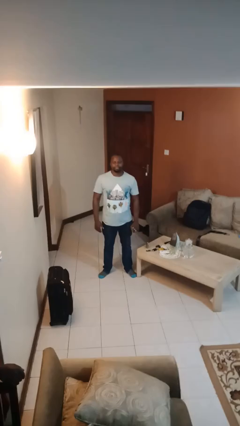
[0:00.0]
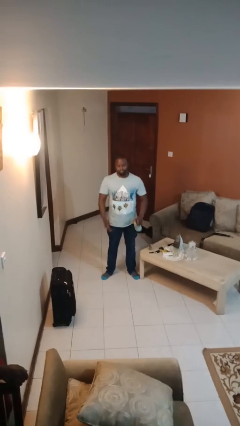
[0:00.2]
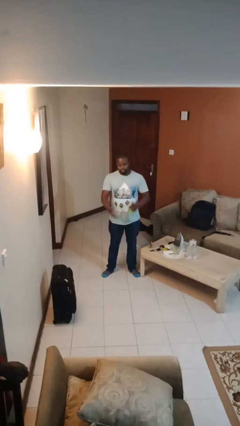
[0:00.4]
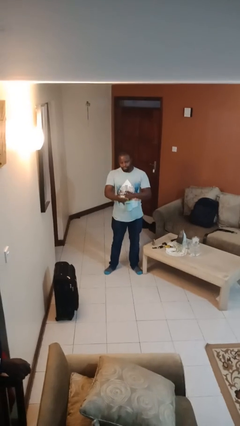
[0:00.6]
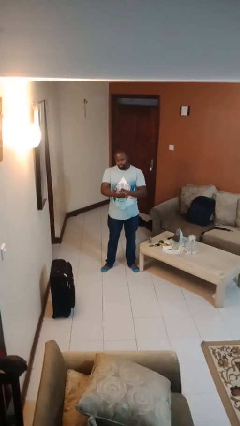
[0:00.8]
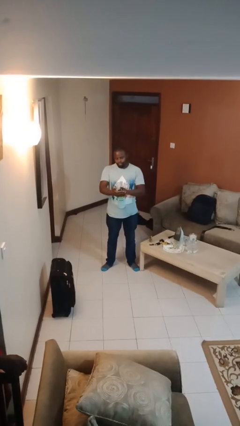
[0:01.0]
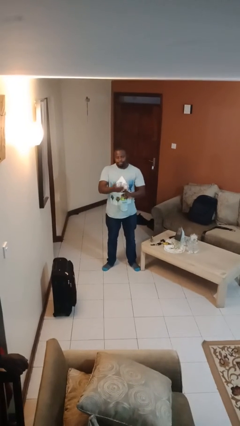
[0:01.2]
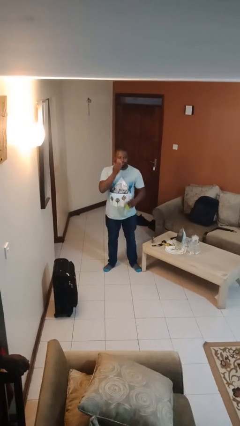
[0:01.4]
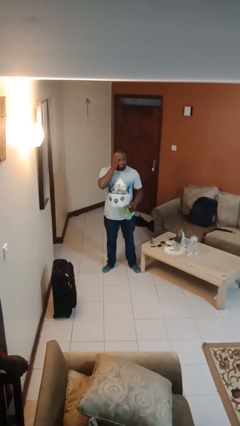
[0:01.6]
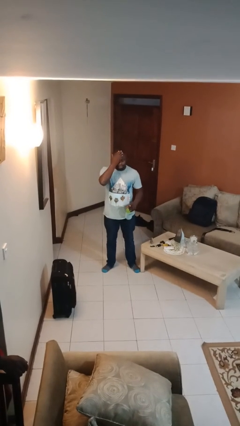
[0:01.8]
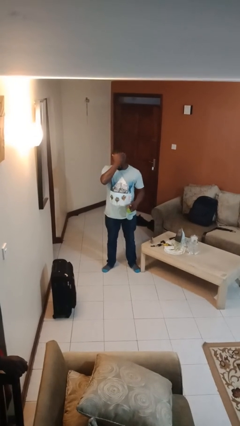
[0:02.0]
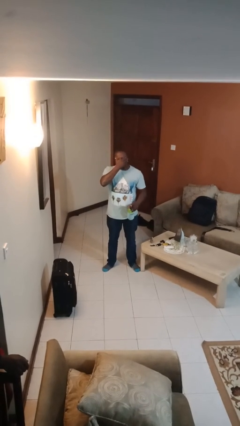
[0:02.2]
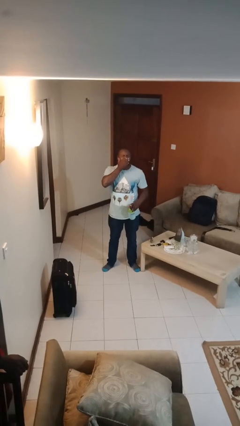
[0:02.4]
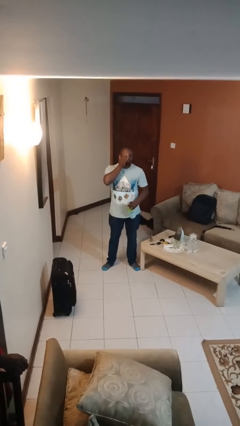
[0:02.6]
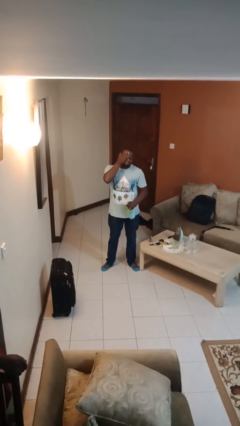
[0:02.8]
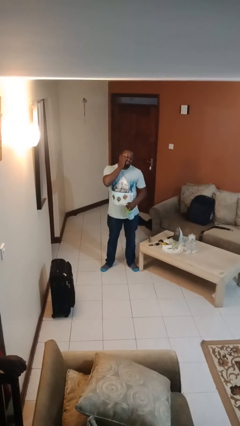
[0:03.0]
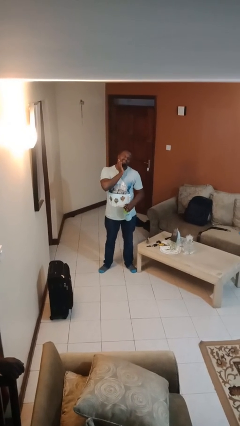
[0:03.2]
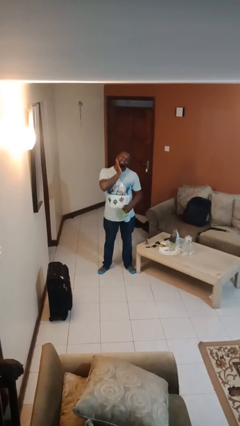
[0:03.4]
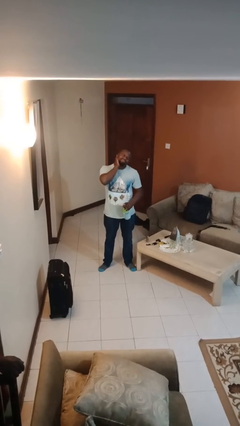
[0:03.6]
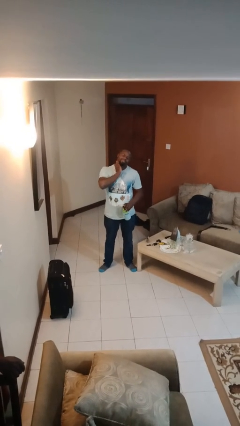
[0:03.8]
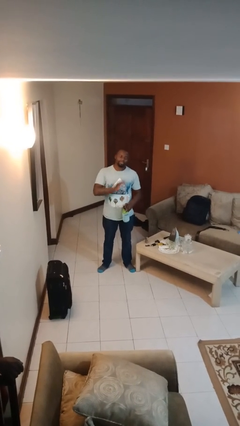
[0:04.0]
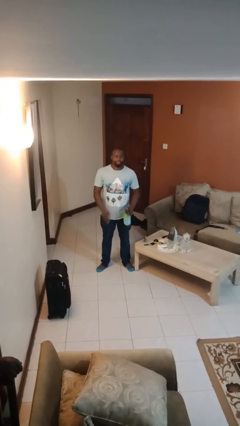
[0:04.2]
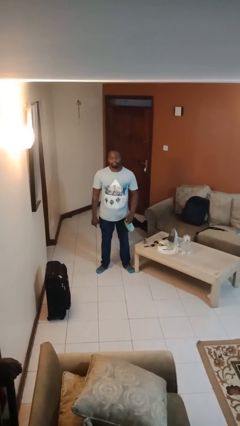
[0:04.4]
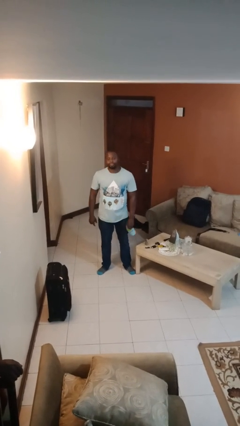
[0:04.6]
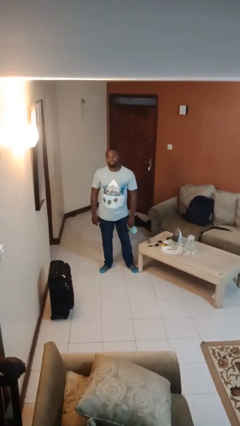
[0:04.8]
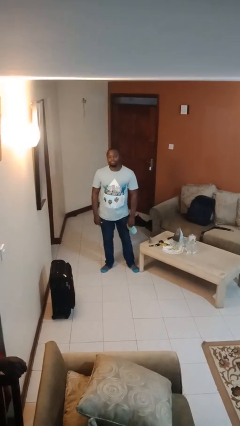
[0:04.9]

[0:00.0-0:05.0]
person applies sunscreen

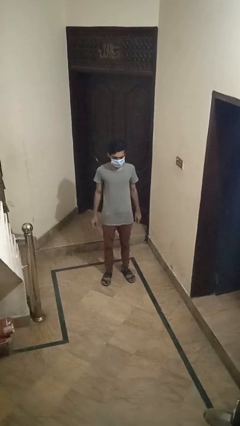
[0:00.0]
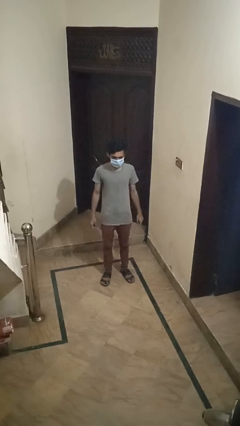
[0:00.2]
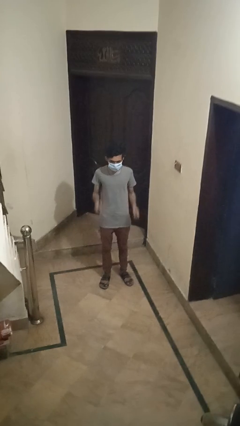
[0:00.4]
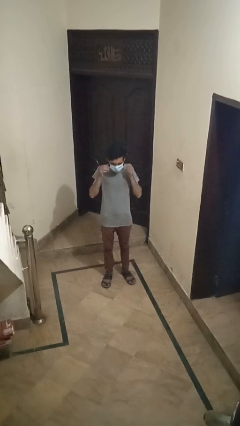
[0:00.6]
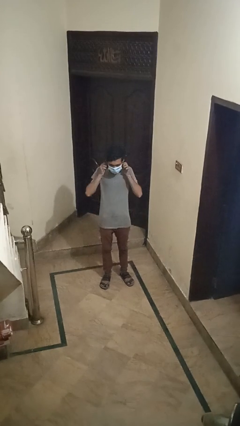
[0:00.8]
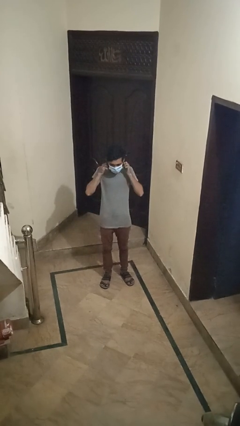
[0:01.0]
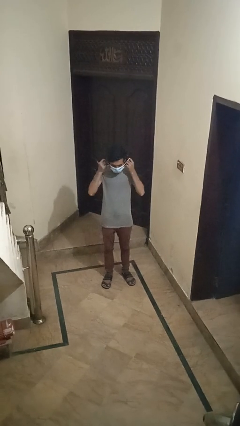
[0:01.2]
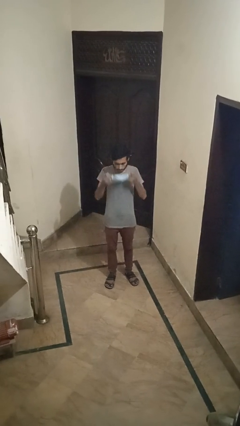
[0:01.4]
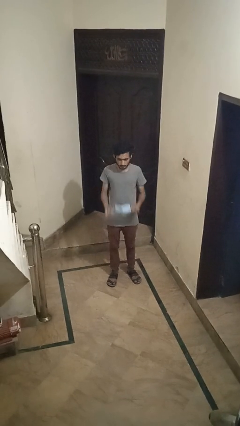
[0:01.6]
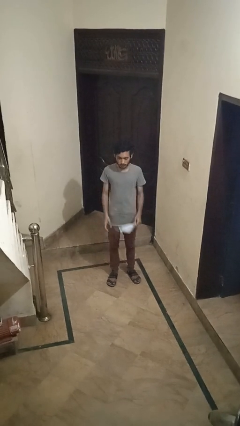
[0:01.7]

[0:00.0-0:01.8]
person takes off facemask

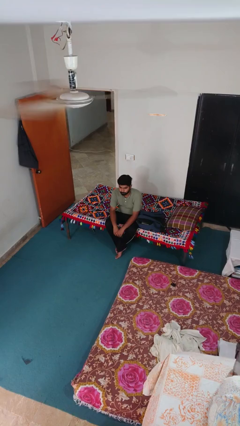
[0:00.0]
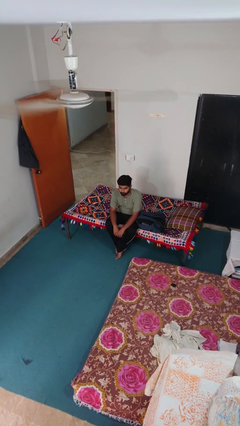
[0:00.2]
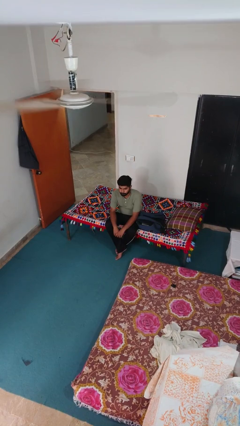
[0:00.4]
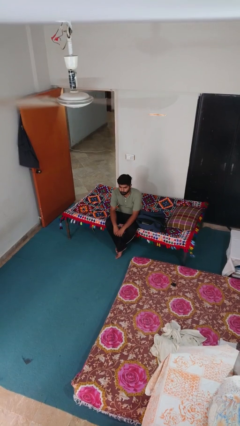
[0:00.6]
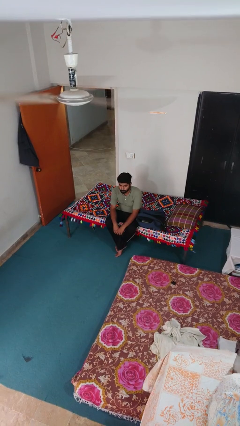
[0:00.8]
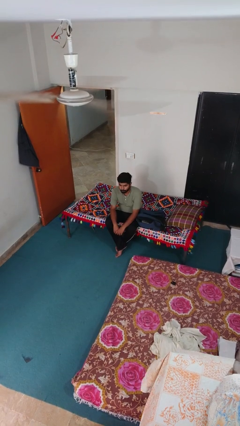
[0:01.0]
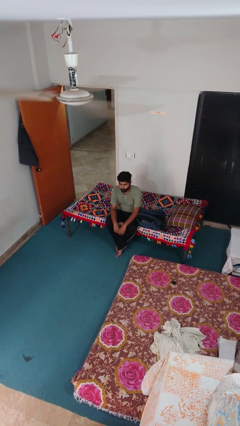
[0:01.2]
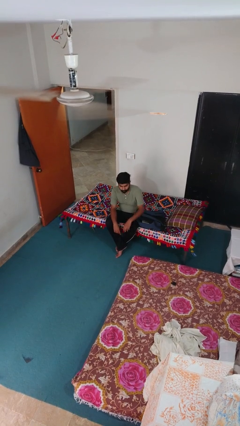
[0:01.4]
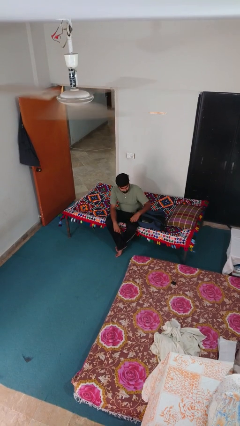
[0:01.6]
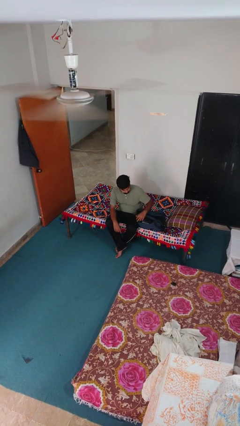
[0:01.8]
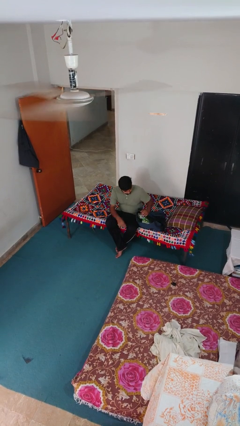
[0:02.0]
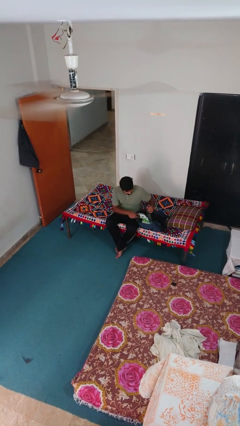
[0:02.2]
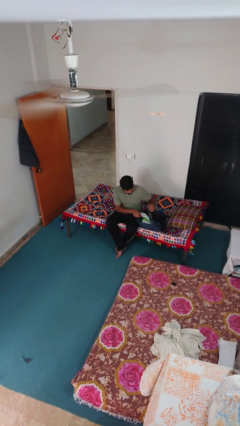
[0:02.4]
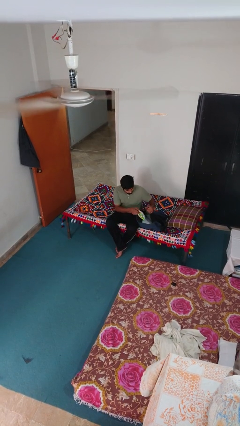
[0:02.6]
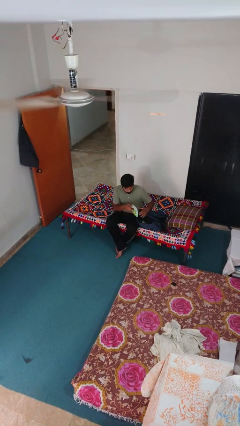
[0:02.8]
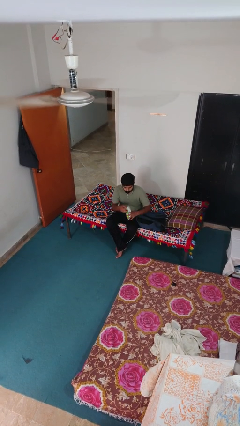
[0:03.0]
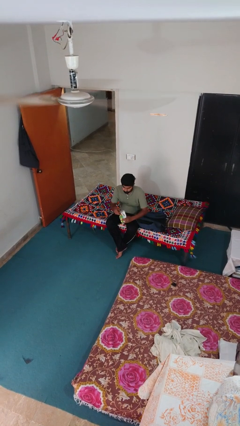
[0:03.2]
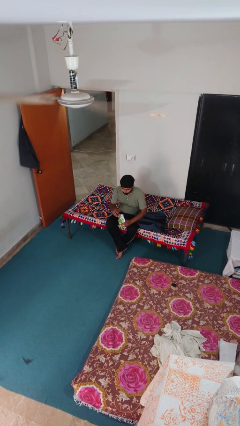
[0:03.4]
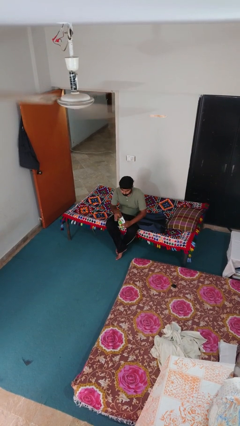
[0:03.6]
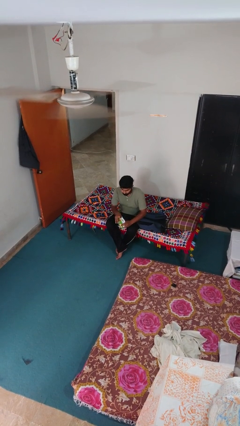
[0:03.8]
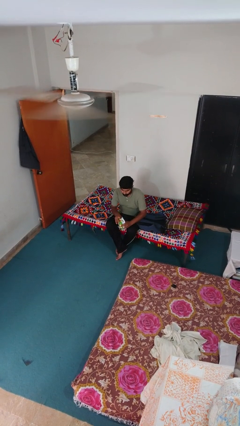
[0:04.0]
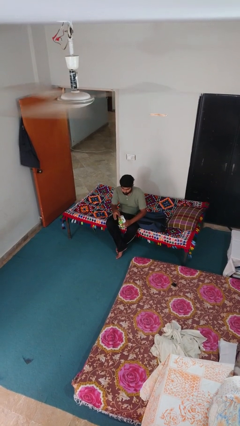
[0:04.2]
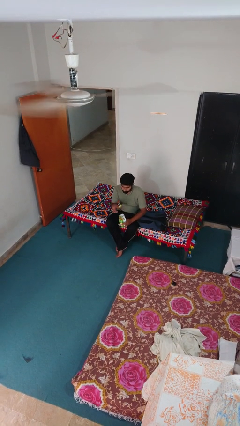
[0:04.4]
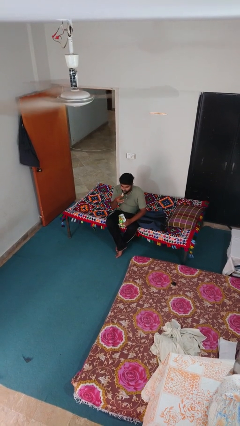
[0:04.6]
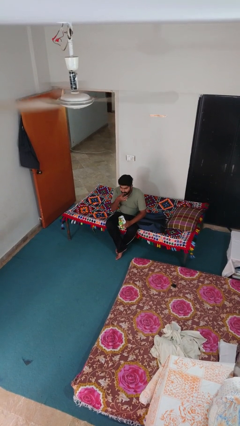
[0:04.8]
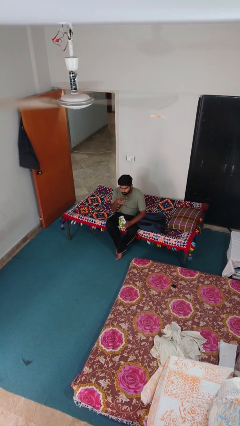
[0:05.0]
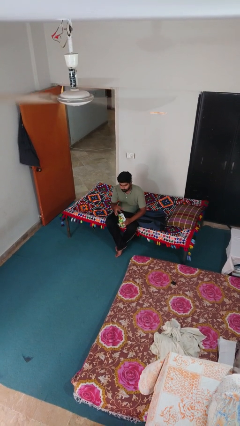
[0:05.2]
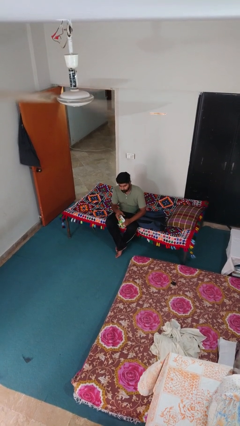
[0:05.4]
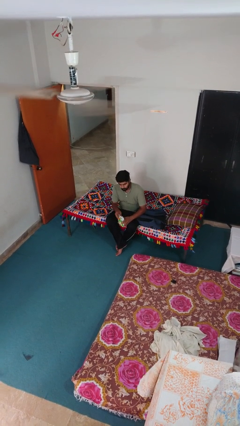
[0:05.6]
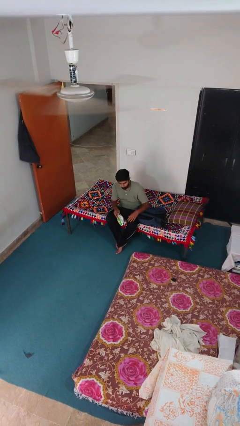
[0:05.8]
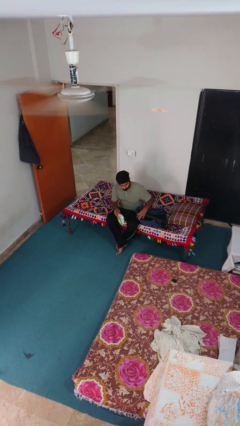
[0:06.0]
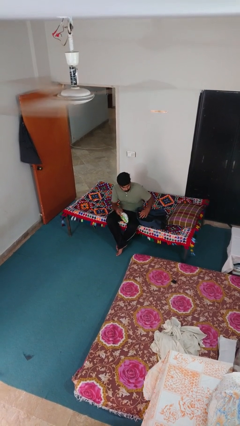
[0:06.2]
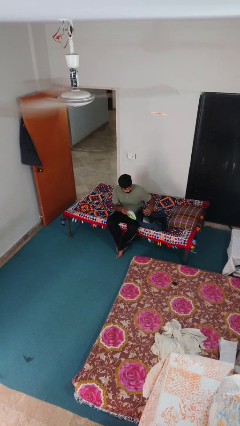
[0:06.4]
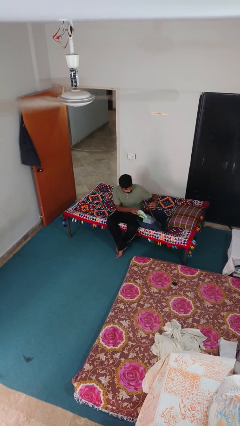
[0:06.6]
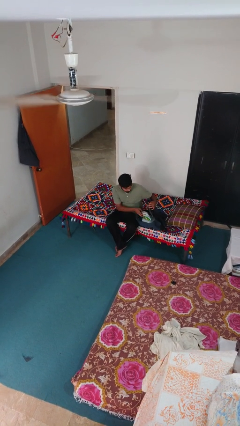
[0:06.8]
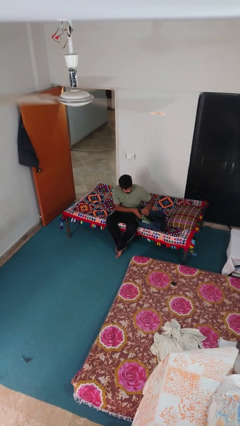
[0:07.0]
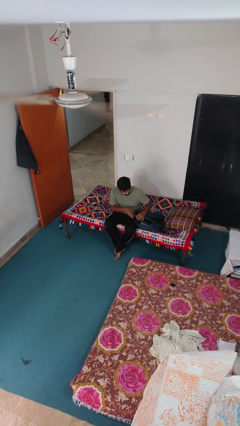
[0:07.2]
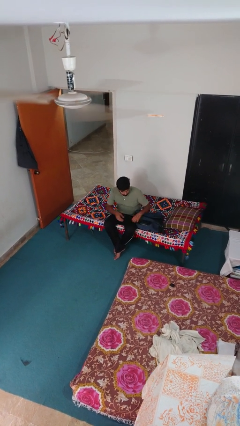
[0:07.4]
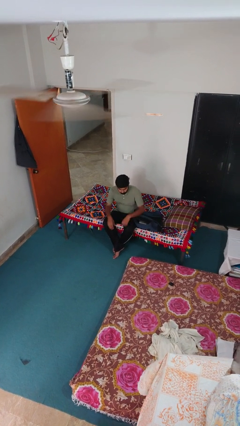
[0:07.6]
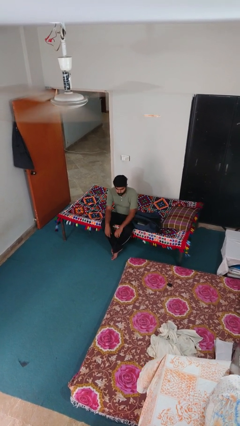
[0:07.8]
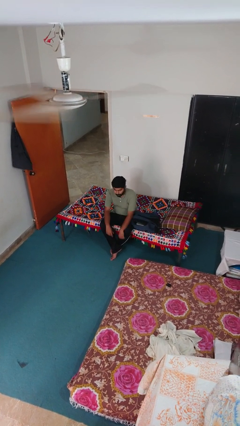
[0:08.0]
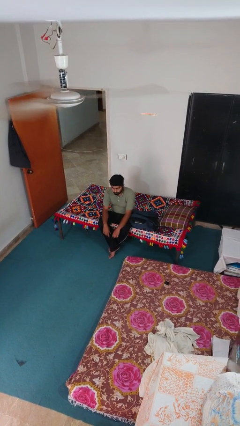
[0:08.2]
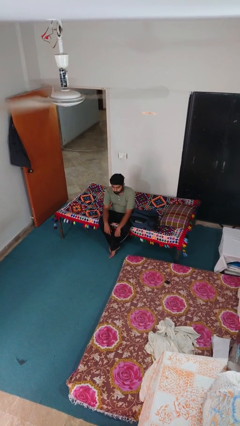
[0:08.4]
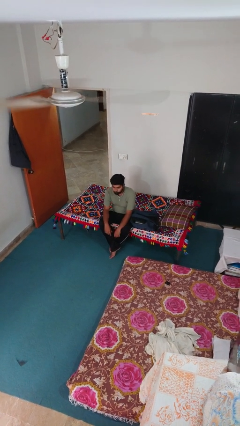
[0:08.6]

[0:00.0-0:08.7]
person eats snack from bag

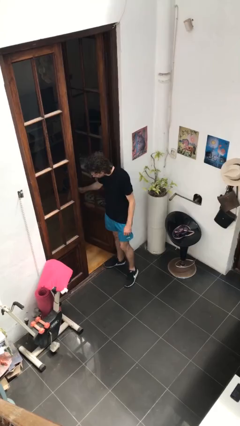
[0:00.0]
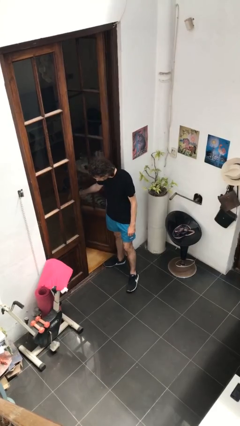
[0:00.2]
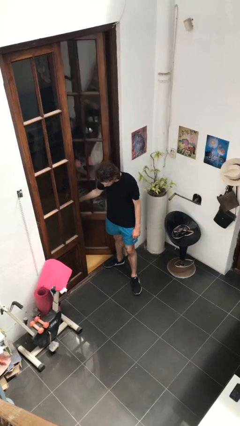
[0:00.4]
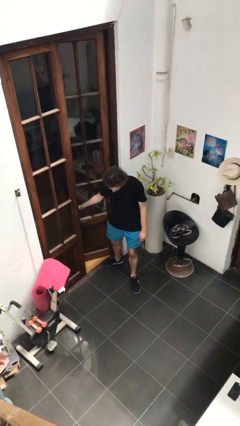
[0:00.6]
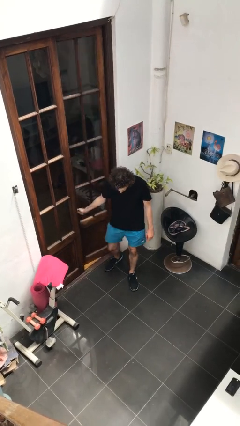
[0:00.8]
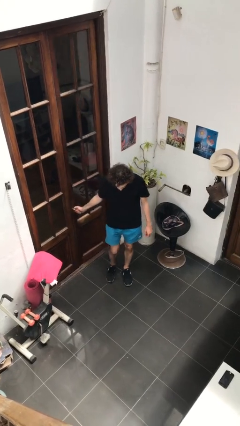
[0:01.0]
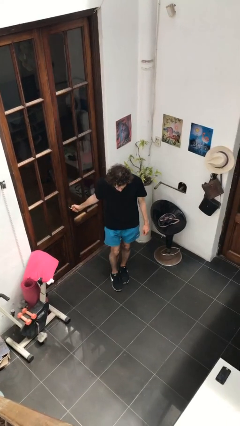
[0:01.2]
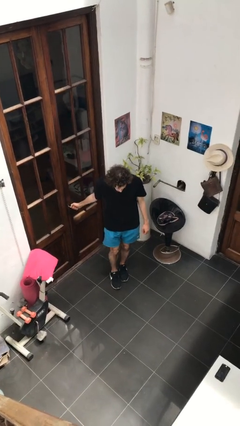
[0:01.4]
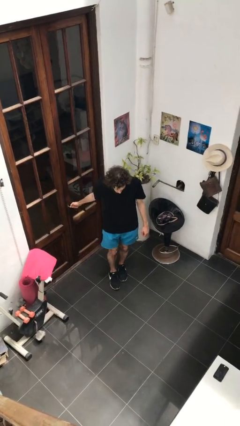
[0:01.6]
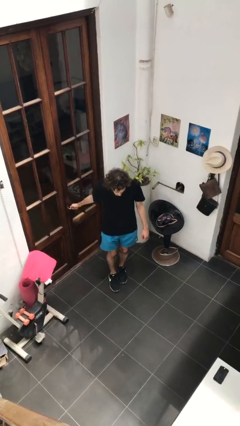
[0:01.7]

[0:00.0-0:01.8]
person closes facility door

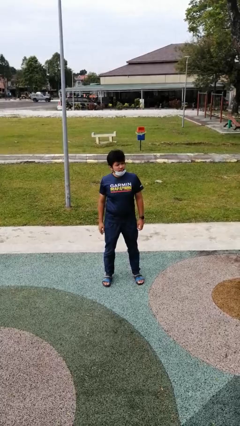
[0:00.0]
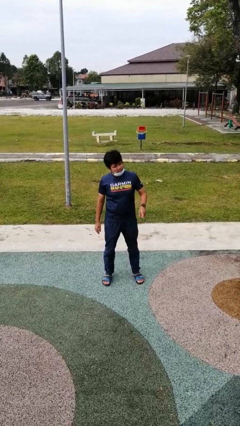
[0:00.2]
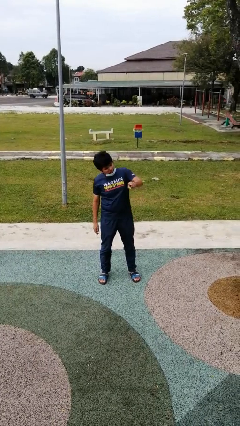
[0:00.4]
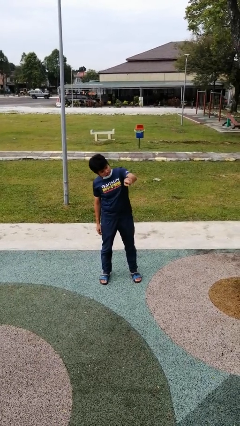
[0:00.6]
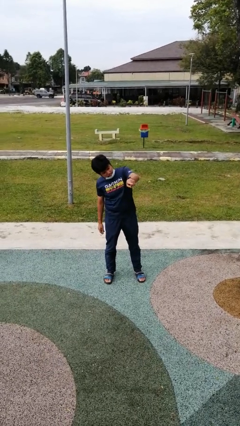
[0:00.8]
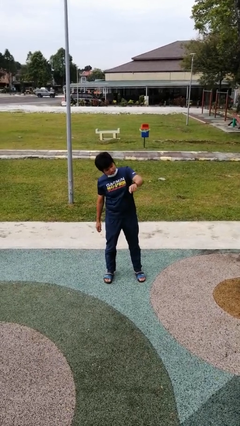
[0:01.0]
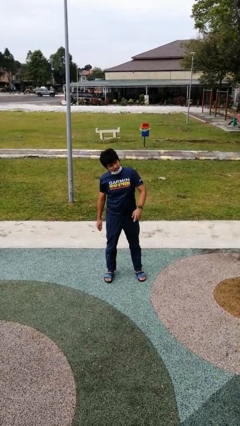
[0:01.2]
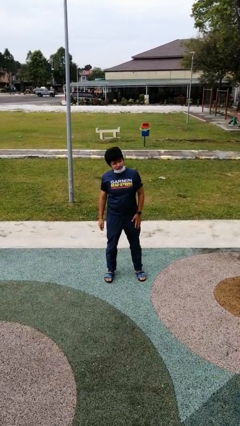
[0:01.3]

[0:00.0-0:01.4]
person points at person
